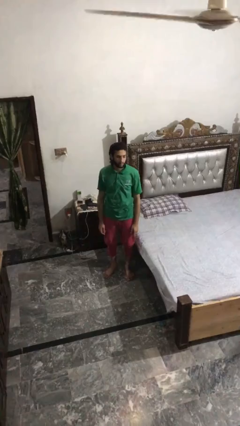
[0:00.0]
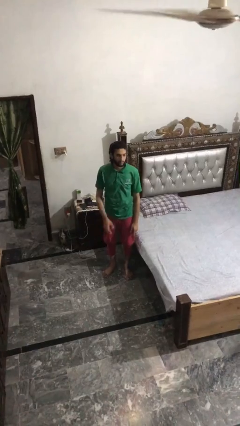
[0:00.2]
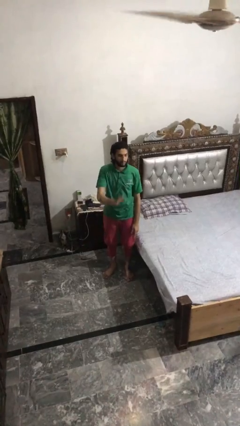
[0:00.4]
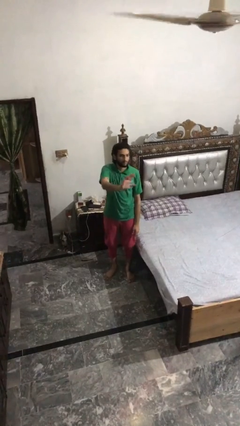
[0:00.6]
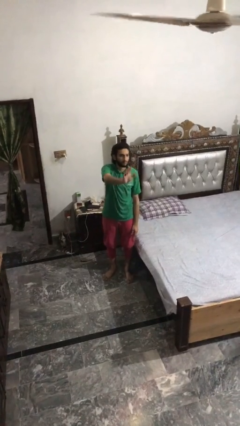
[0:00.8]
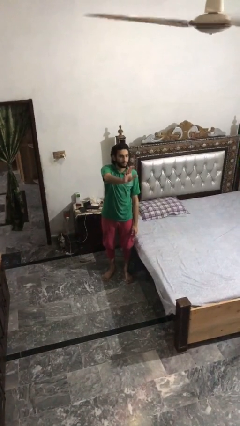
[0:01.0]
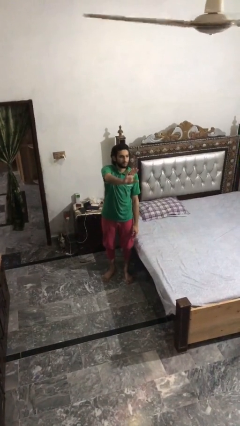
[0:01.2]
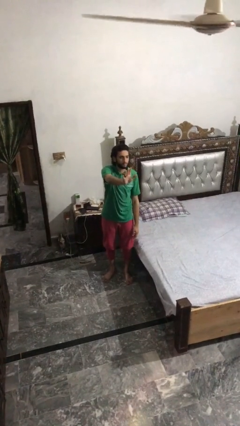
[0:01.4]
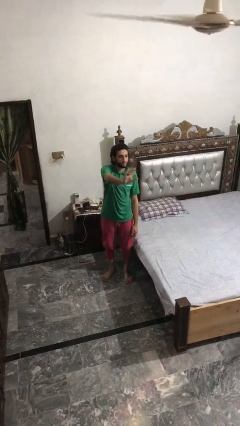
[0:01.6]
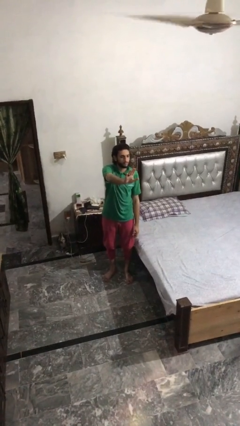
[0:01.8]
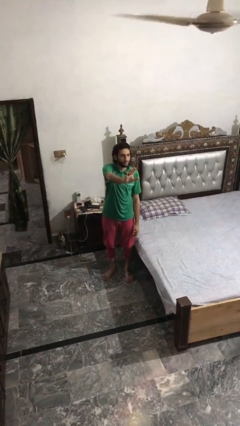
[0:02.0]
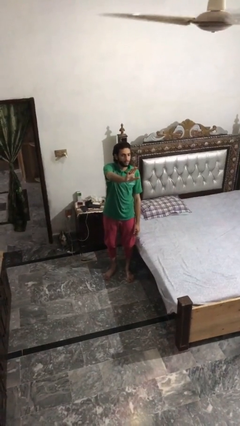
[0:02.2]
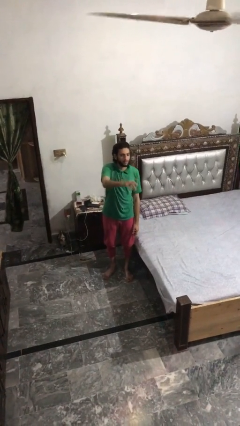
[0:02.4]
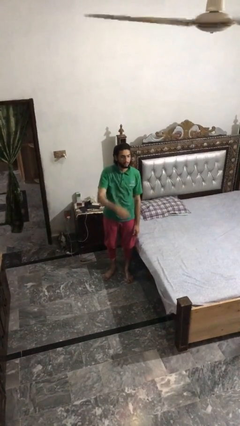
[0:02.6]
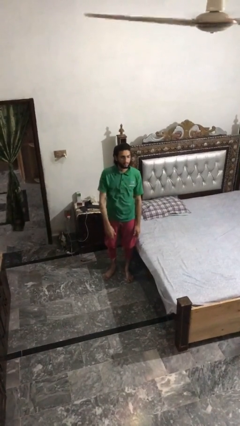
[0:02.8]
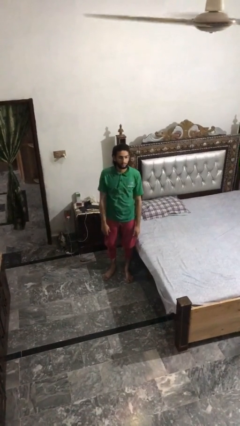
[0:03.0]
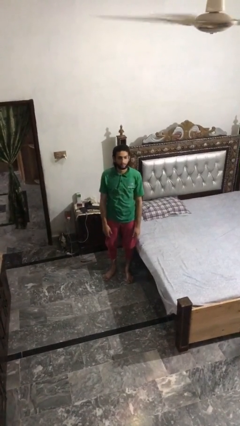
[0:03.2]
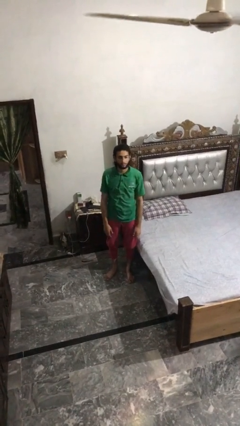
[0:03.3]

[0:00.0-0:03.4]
person waves at person

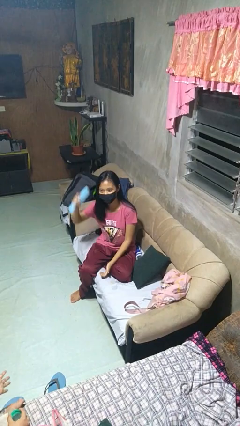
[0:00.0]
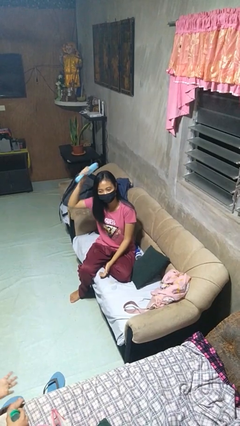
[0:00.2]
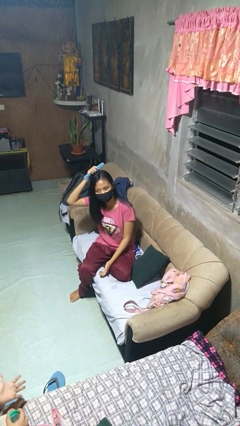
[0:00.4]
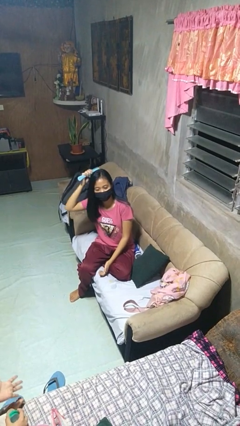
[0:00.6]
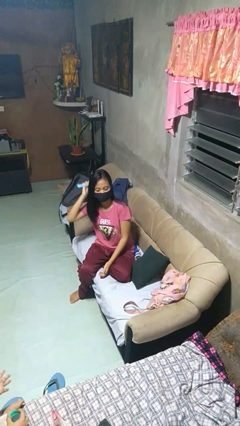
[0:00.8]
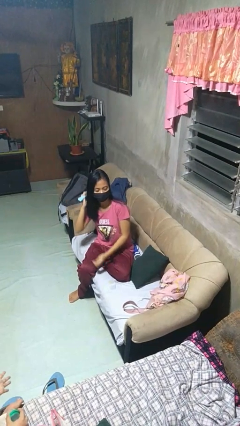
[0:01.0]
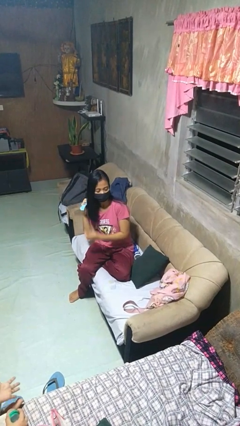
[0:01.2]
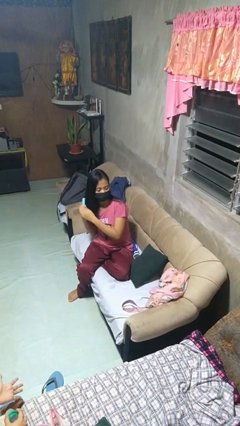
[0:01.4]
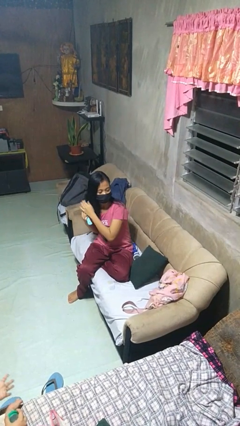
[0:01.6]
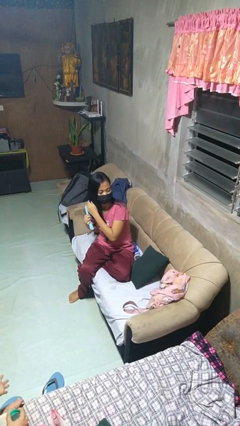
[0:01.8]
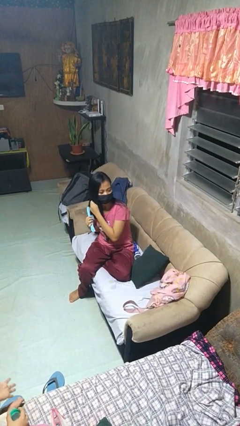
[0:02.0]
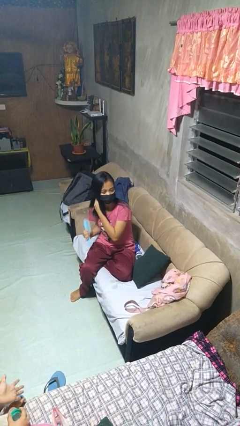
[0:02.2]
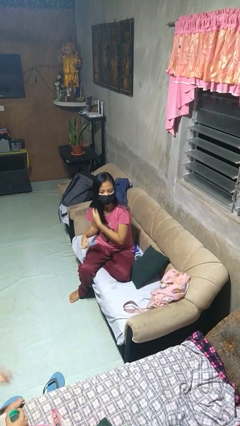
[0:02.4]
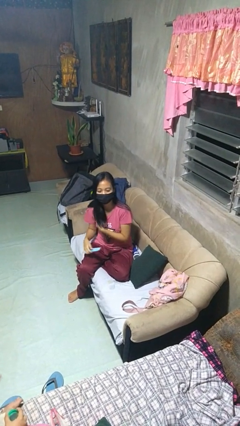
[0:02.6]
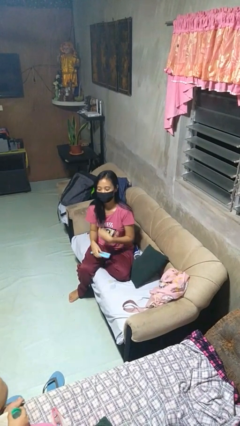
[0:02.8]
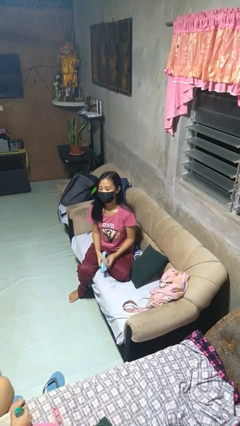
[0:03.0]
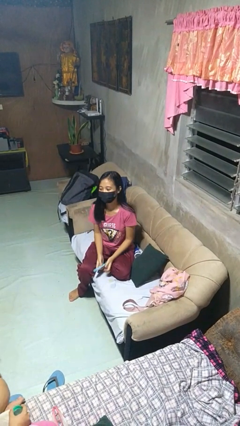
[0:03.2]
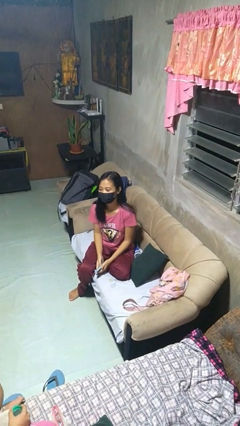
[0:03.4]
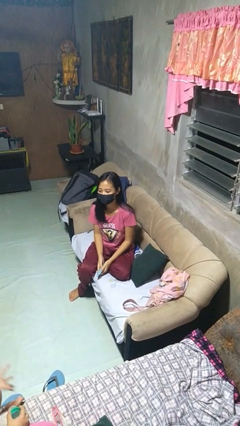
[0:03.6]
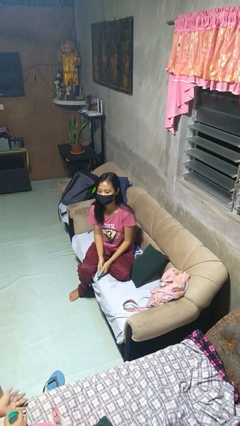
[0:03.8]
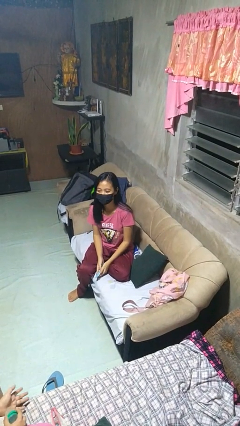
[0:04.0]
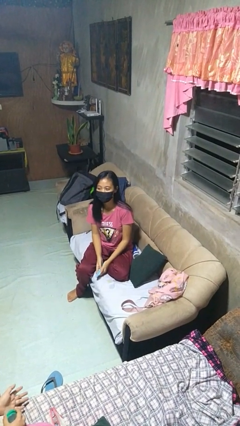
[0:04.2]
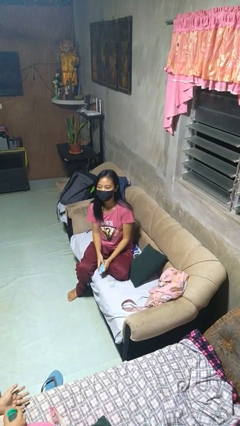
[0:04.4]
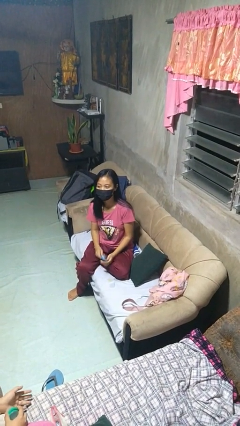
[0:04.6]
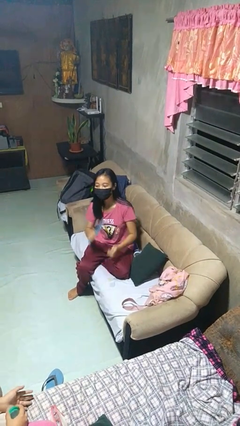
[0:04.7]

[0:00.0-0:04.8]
person brushes hair

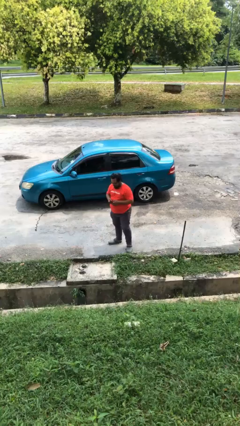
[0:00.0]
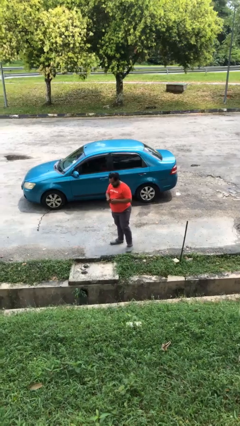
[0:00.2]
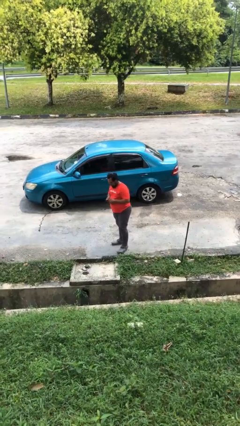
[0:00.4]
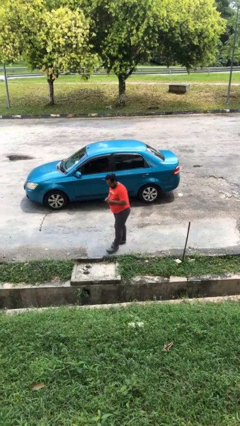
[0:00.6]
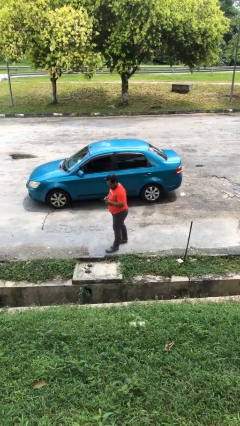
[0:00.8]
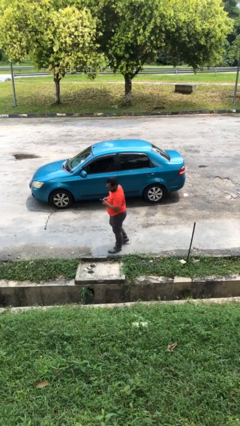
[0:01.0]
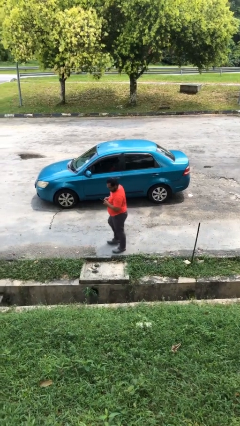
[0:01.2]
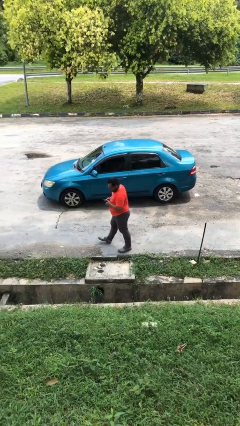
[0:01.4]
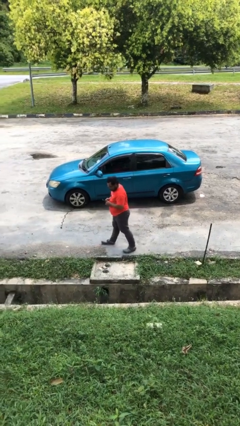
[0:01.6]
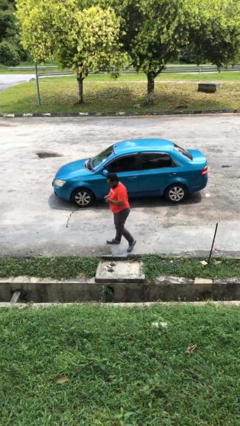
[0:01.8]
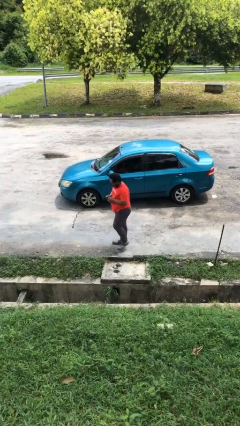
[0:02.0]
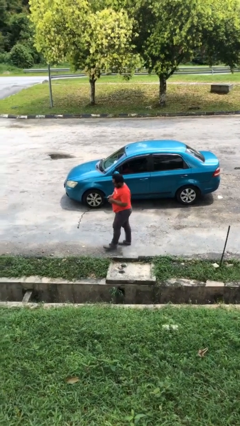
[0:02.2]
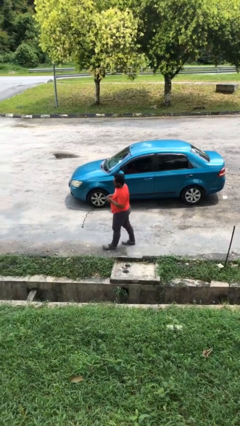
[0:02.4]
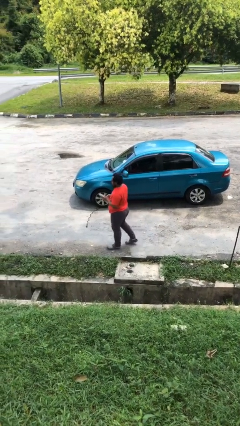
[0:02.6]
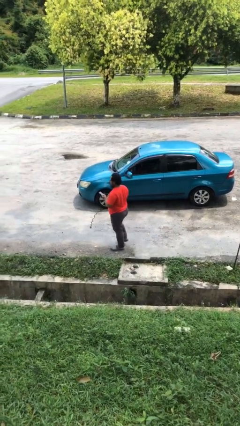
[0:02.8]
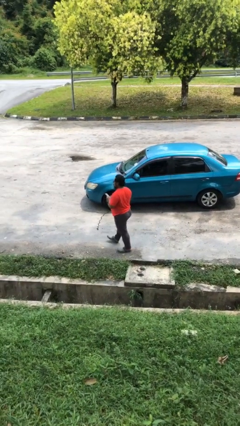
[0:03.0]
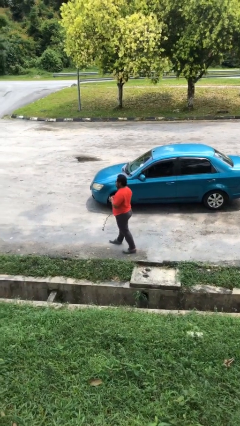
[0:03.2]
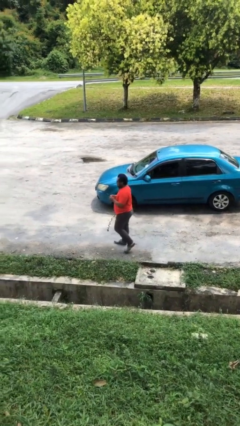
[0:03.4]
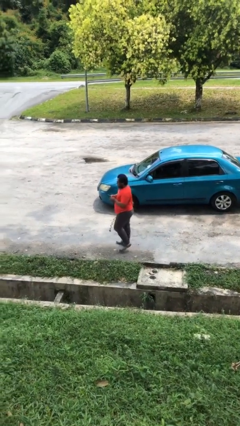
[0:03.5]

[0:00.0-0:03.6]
person texts on phone

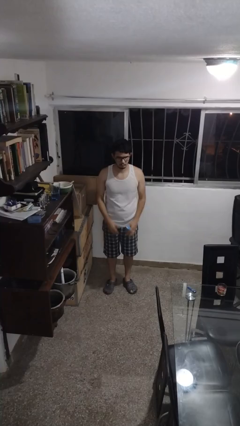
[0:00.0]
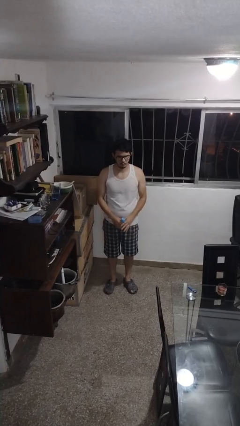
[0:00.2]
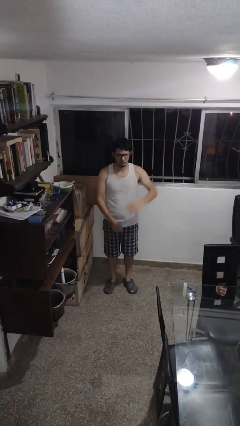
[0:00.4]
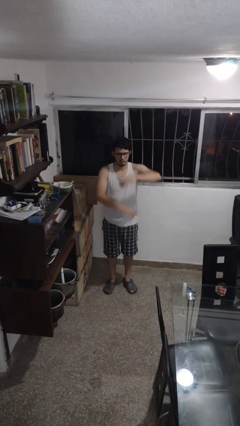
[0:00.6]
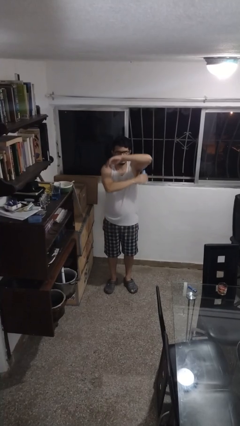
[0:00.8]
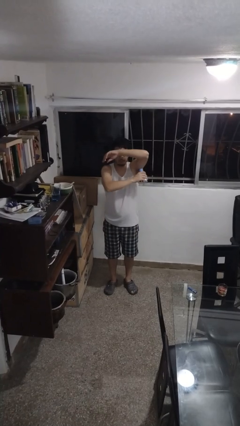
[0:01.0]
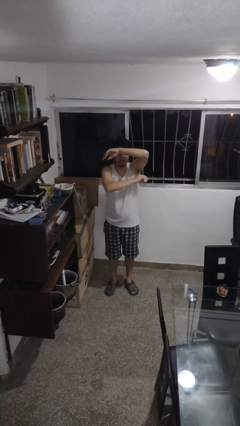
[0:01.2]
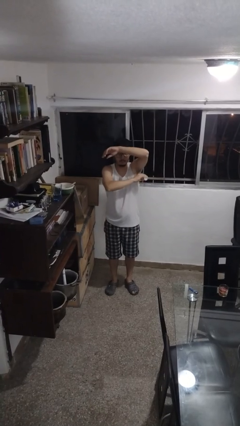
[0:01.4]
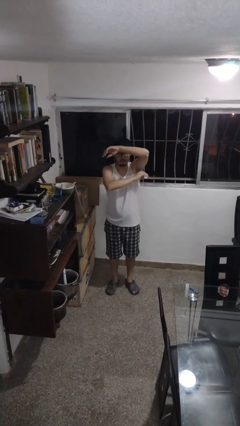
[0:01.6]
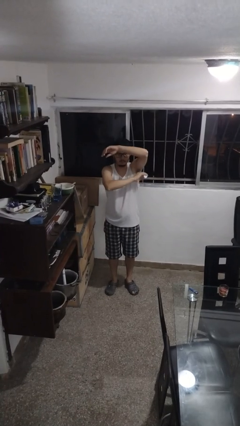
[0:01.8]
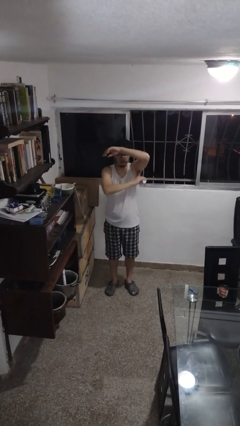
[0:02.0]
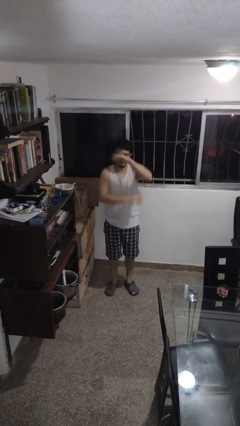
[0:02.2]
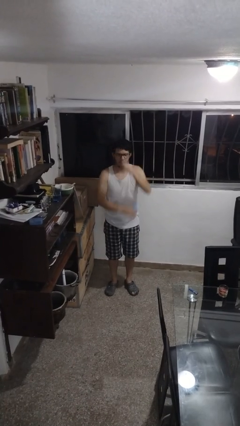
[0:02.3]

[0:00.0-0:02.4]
person applies deodorant

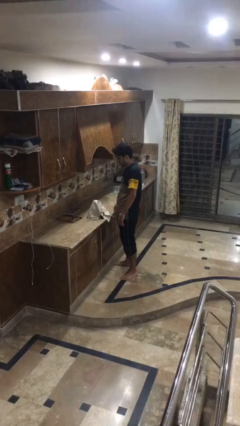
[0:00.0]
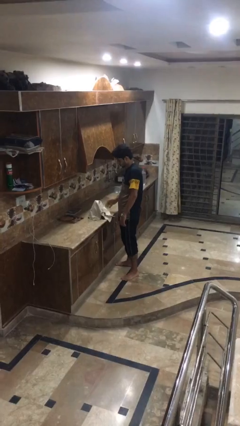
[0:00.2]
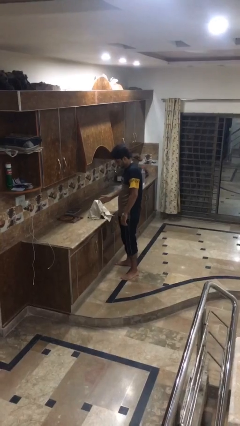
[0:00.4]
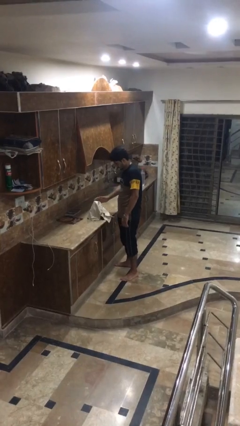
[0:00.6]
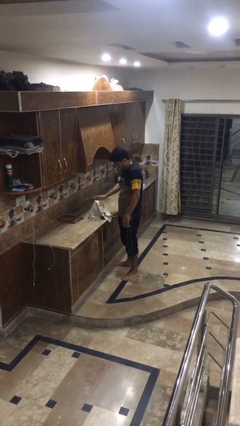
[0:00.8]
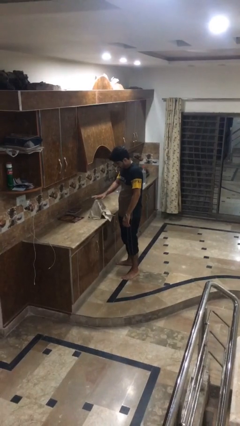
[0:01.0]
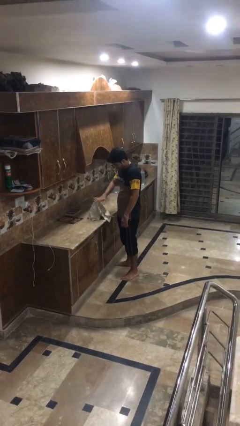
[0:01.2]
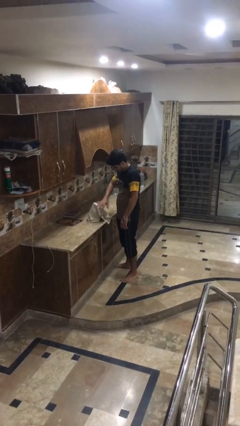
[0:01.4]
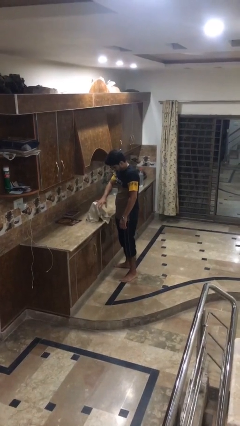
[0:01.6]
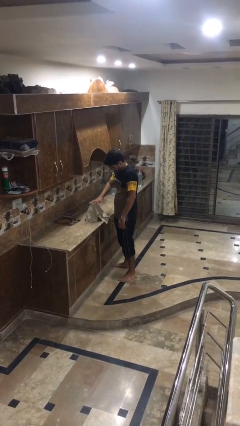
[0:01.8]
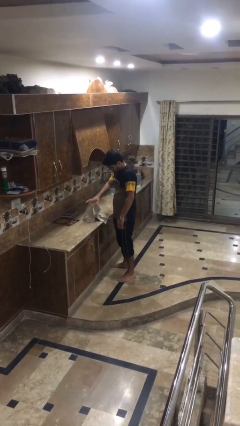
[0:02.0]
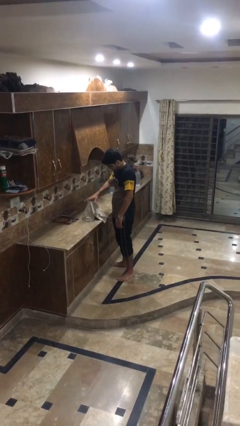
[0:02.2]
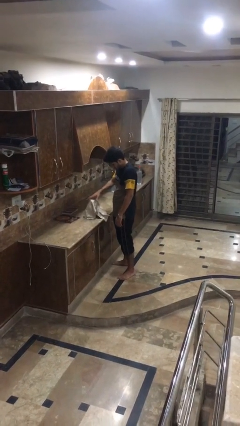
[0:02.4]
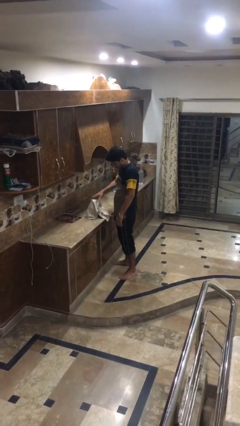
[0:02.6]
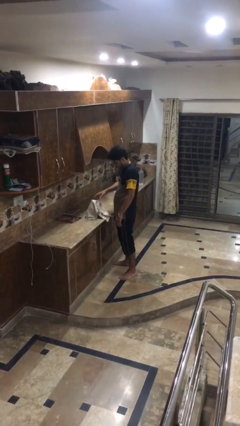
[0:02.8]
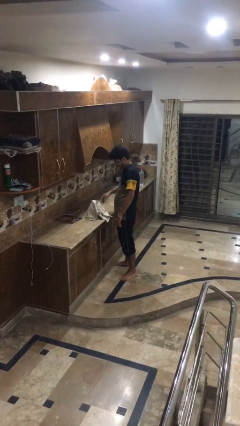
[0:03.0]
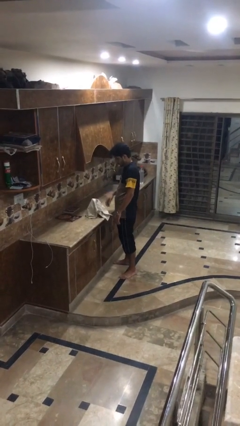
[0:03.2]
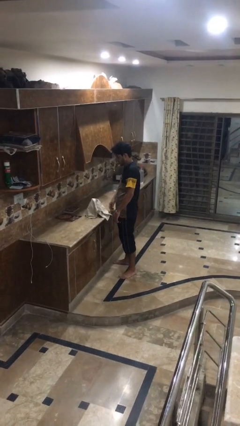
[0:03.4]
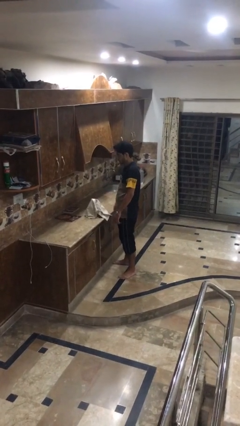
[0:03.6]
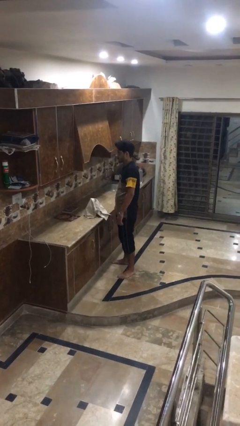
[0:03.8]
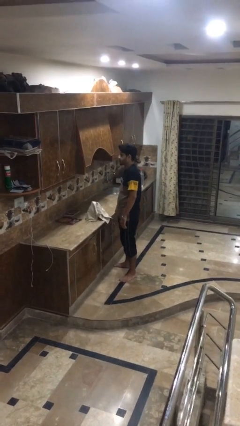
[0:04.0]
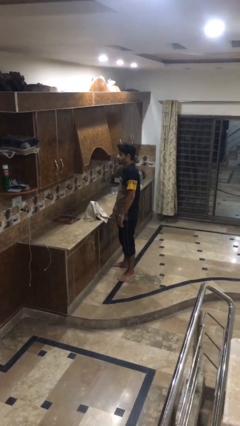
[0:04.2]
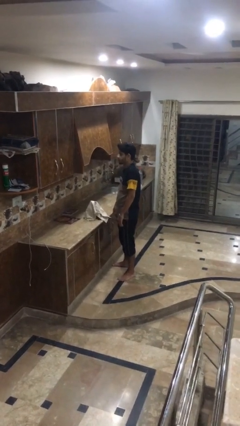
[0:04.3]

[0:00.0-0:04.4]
person waves hand over object
